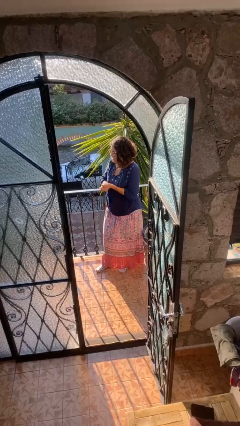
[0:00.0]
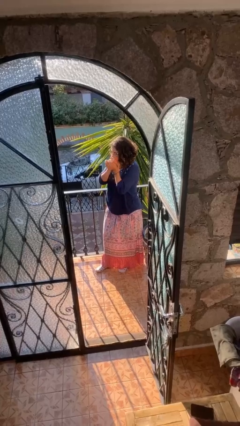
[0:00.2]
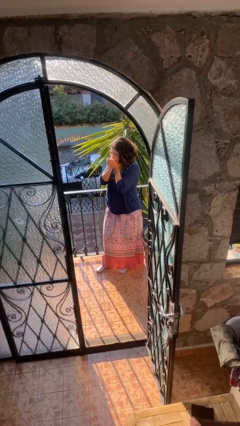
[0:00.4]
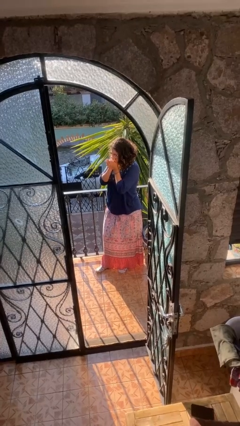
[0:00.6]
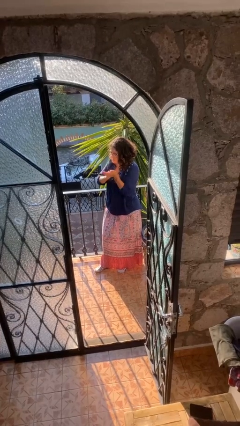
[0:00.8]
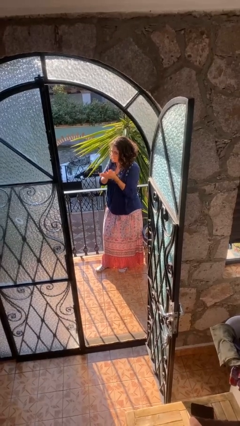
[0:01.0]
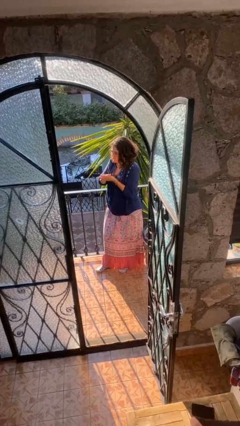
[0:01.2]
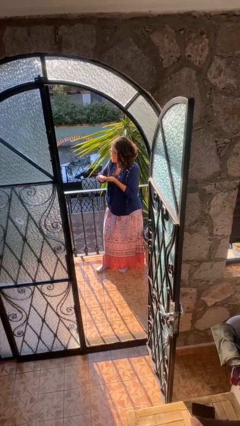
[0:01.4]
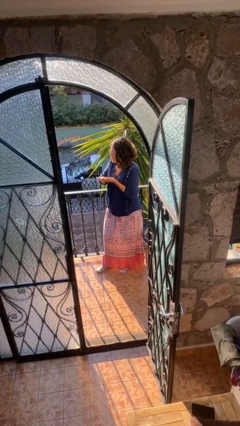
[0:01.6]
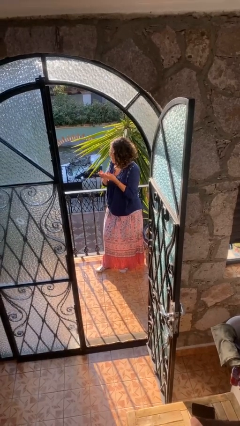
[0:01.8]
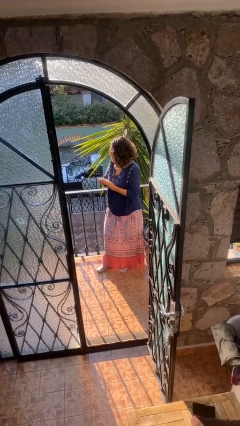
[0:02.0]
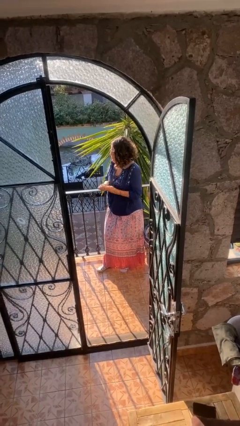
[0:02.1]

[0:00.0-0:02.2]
person blows into hands

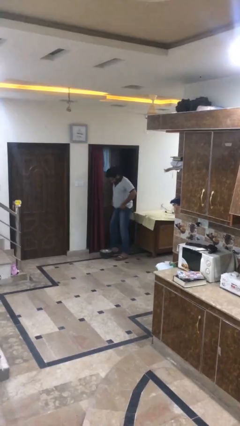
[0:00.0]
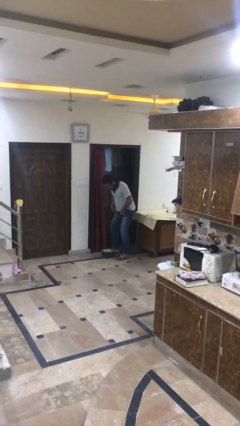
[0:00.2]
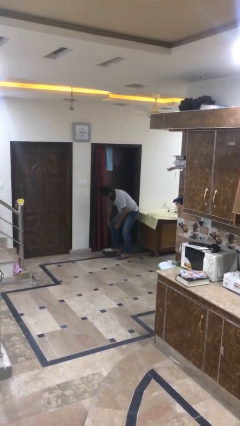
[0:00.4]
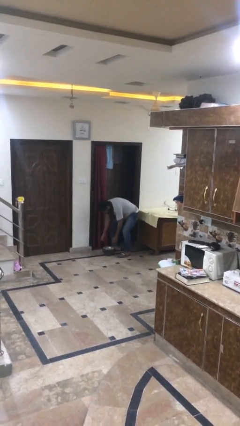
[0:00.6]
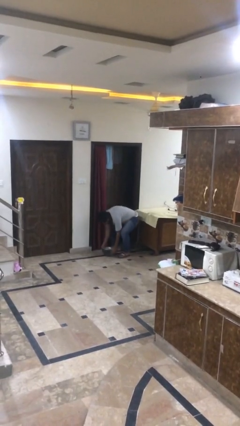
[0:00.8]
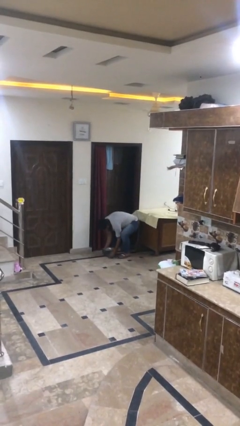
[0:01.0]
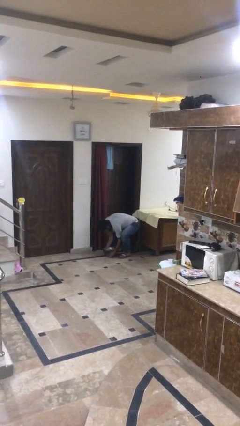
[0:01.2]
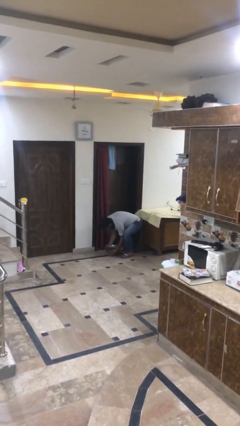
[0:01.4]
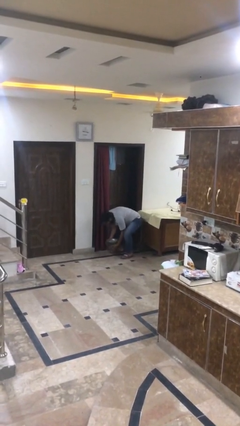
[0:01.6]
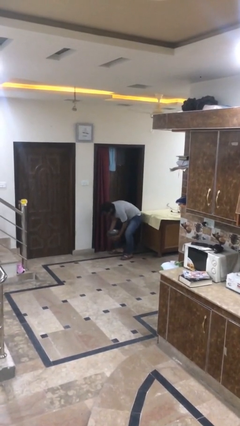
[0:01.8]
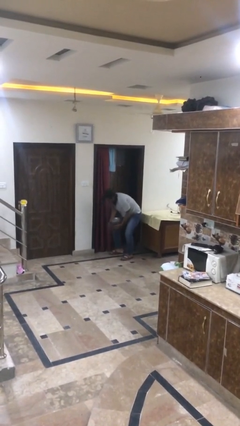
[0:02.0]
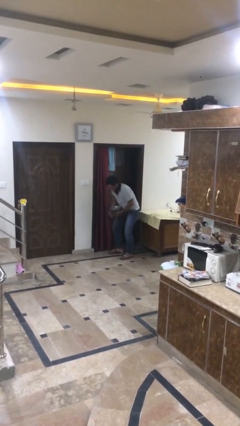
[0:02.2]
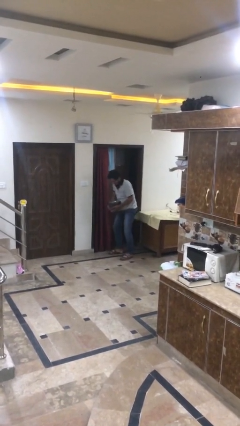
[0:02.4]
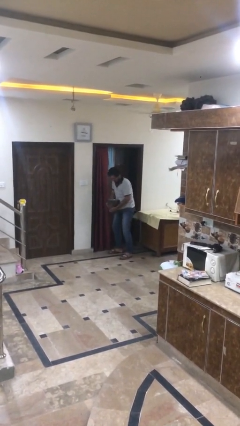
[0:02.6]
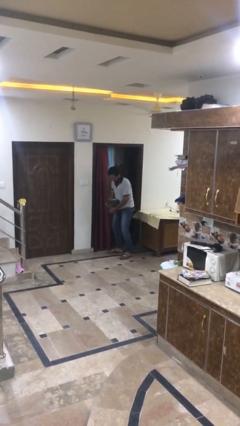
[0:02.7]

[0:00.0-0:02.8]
person picks up object from floor

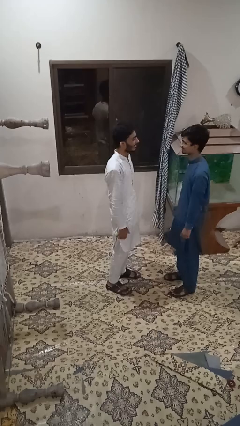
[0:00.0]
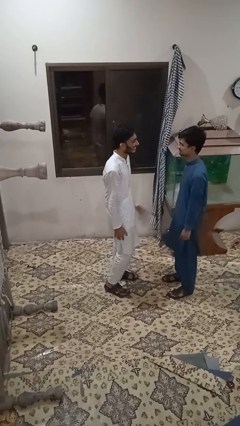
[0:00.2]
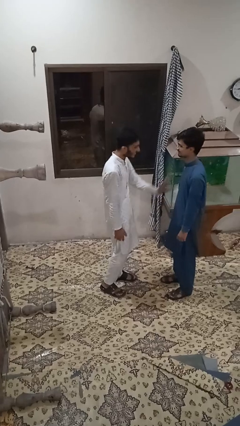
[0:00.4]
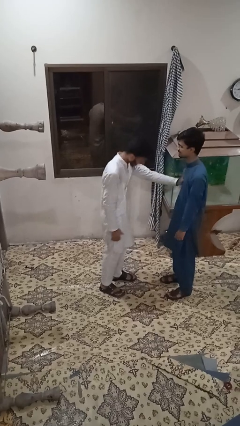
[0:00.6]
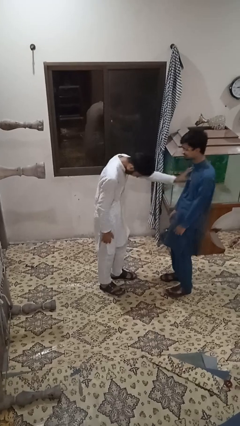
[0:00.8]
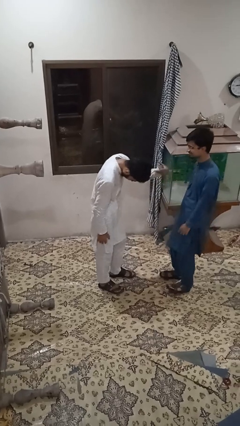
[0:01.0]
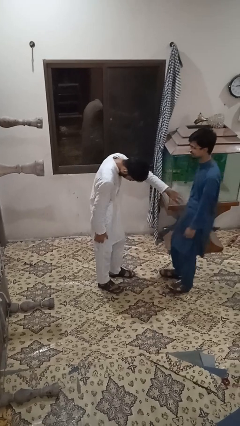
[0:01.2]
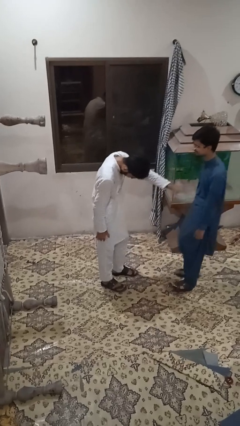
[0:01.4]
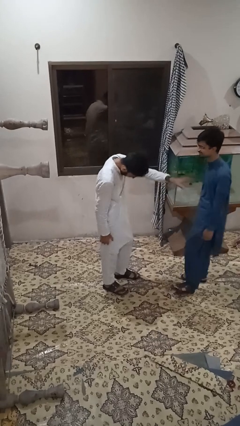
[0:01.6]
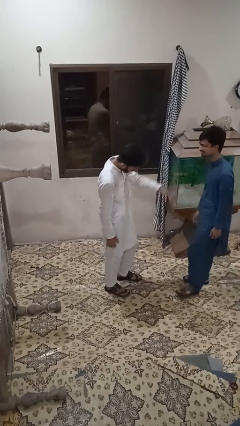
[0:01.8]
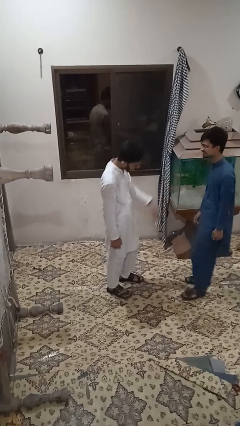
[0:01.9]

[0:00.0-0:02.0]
person shoves person

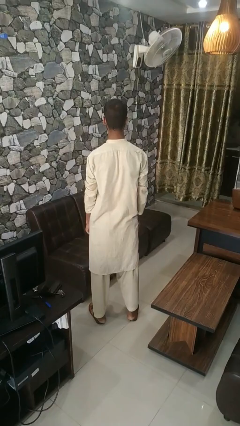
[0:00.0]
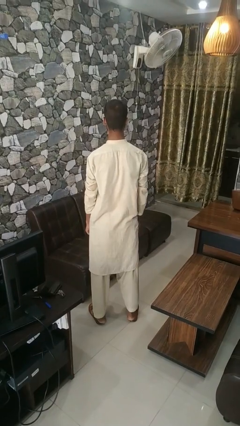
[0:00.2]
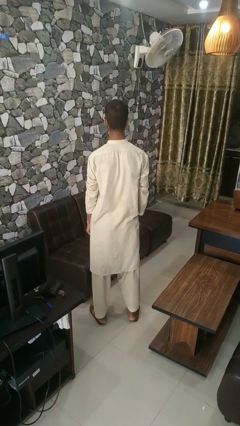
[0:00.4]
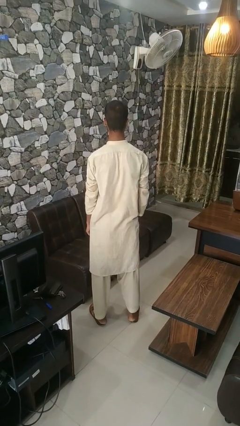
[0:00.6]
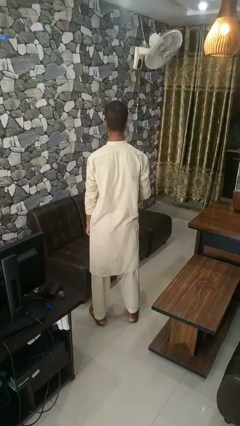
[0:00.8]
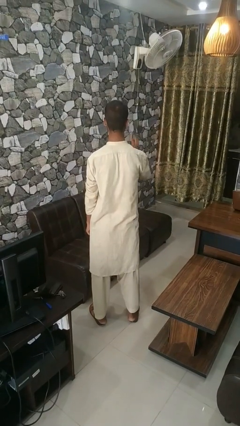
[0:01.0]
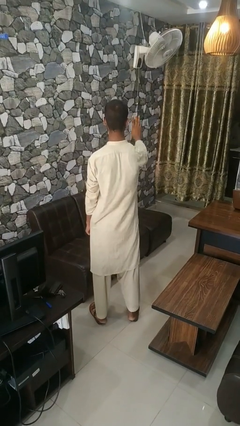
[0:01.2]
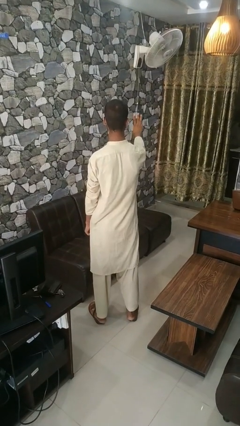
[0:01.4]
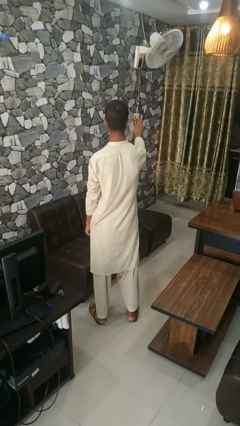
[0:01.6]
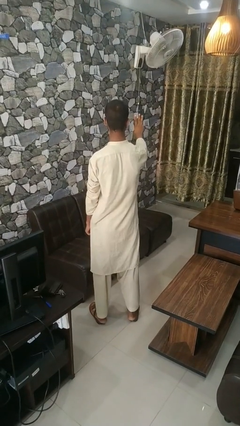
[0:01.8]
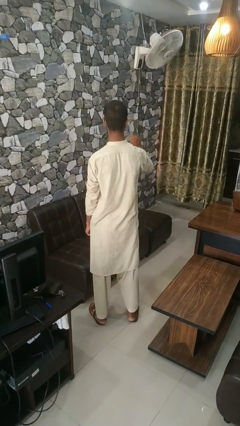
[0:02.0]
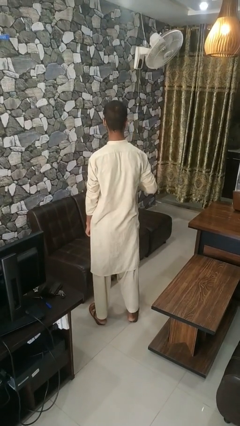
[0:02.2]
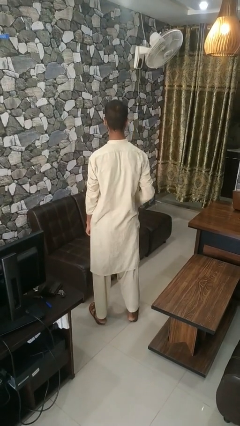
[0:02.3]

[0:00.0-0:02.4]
person gestures number three

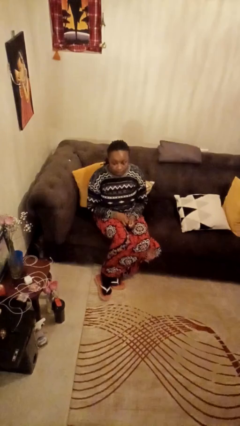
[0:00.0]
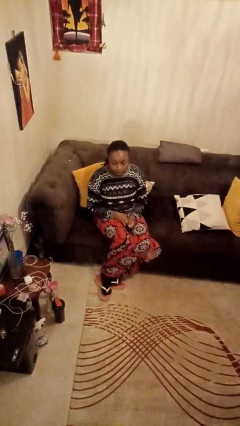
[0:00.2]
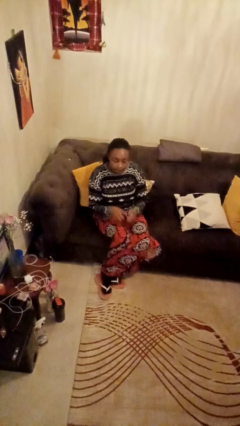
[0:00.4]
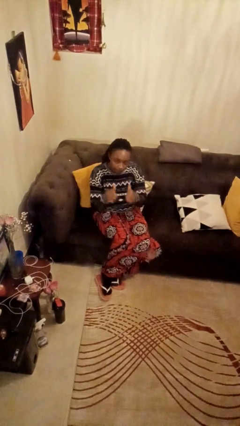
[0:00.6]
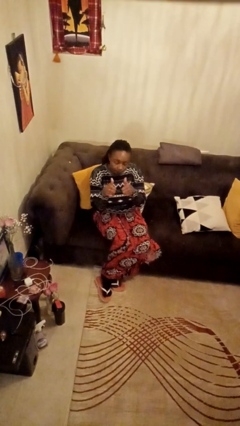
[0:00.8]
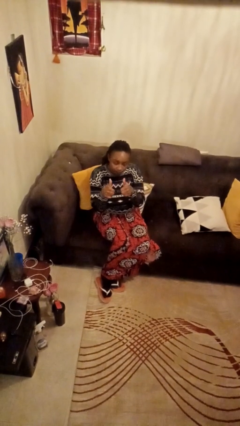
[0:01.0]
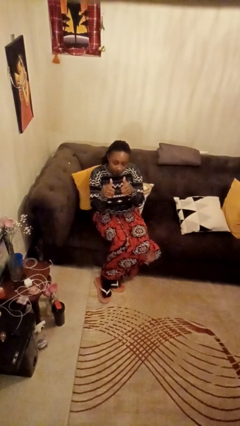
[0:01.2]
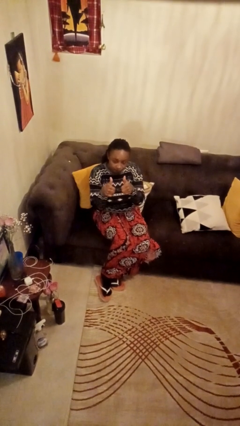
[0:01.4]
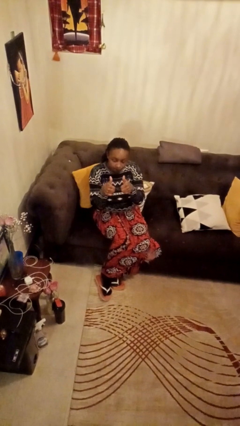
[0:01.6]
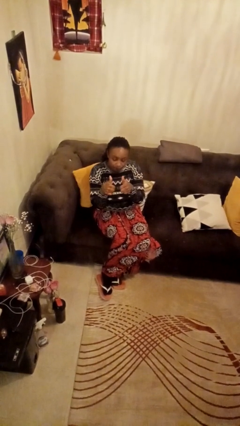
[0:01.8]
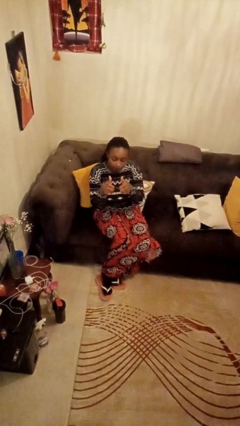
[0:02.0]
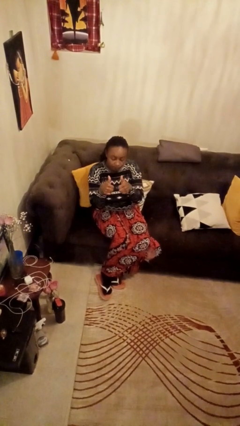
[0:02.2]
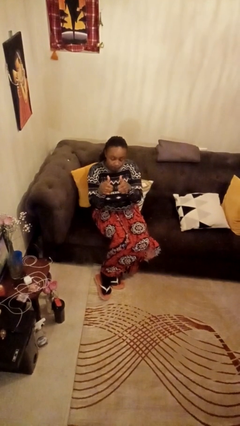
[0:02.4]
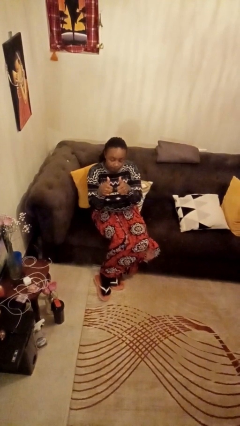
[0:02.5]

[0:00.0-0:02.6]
person gestures thumbs up

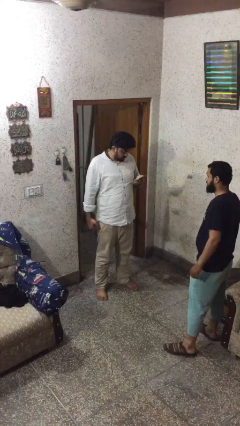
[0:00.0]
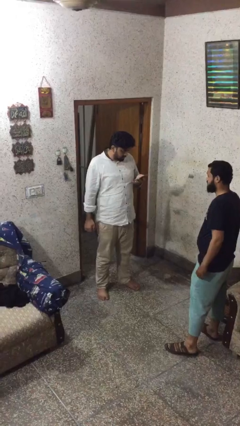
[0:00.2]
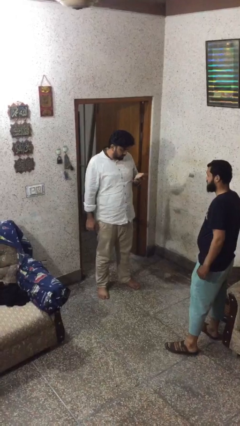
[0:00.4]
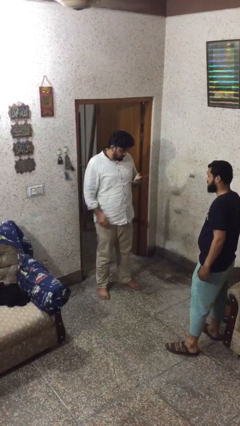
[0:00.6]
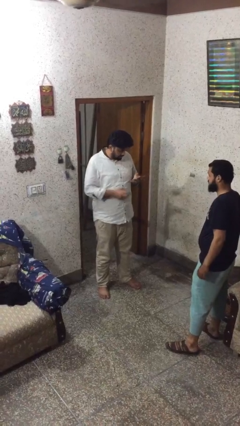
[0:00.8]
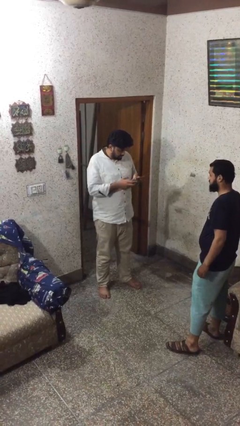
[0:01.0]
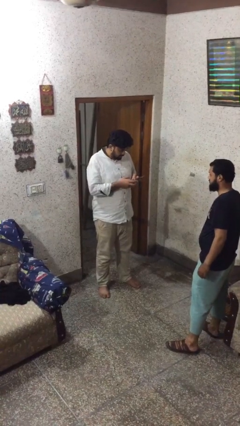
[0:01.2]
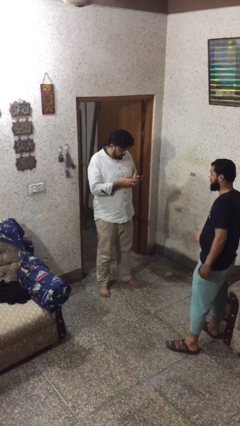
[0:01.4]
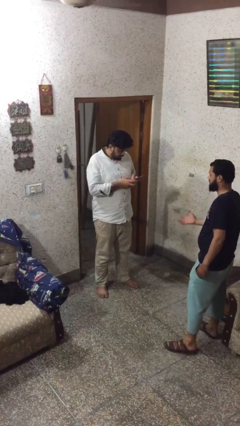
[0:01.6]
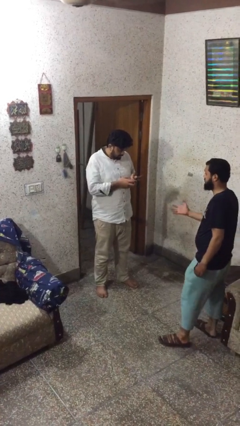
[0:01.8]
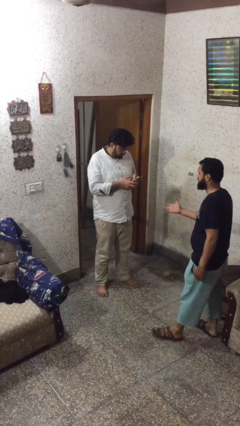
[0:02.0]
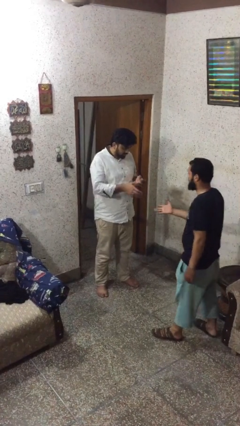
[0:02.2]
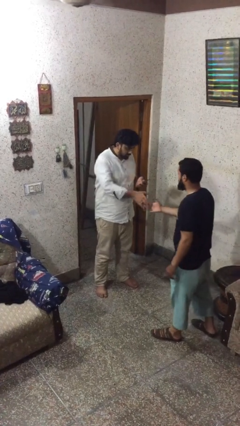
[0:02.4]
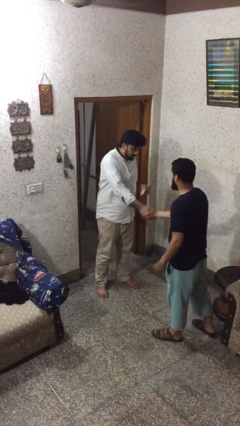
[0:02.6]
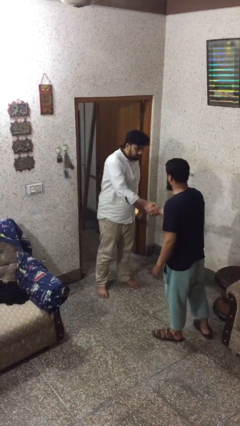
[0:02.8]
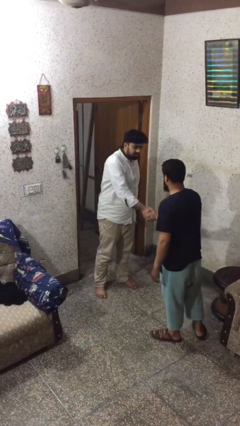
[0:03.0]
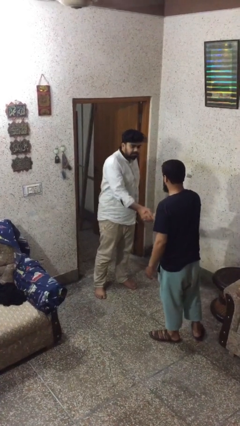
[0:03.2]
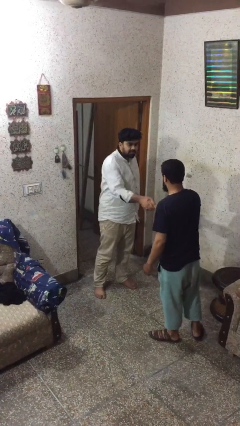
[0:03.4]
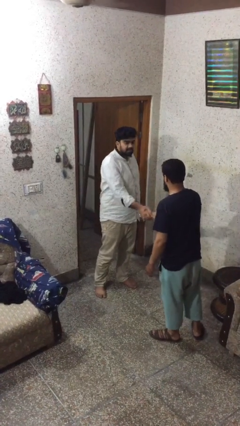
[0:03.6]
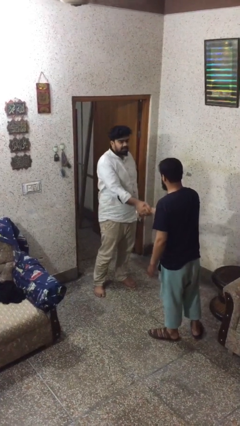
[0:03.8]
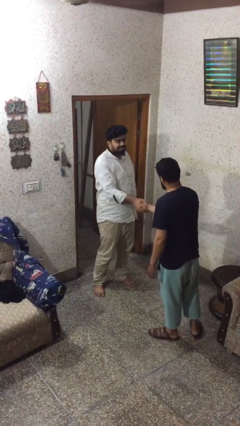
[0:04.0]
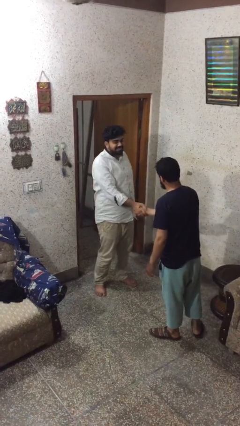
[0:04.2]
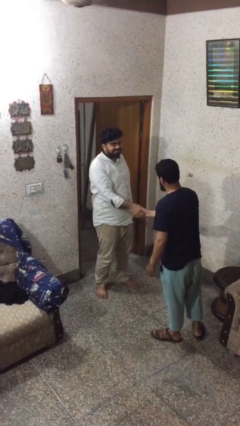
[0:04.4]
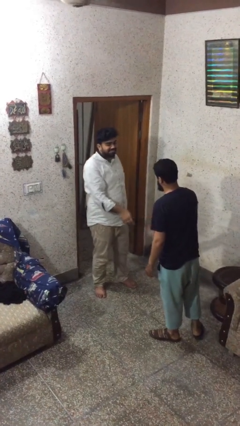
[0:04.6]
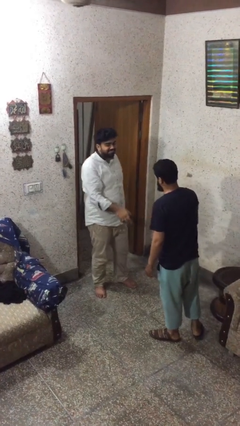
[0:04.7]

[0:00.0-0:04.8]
person shakes hand

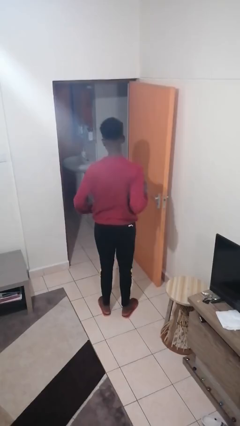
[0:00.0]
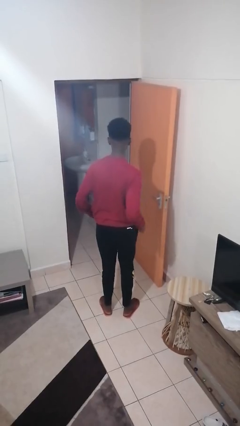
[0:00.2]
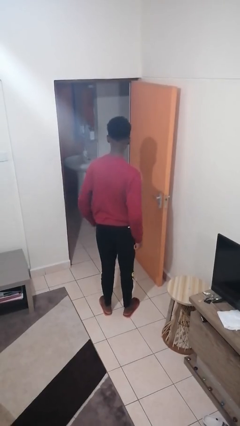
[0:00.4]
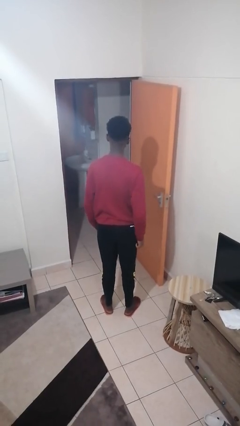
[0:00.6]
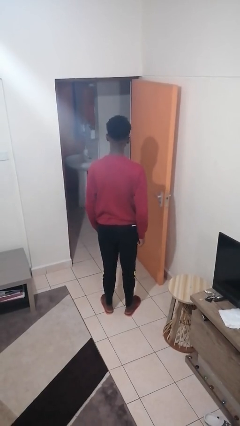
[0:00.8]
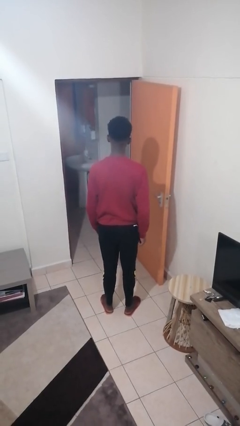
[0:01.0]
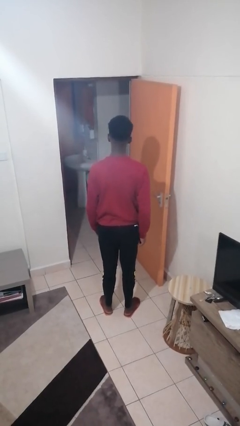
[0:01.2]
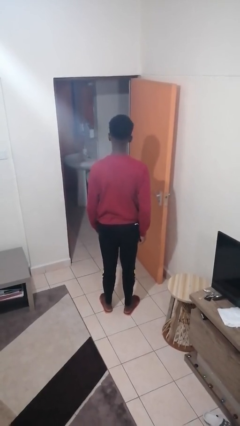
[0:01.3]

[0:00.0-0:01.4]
person punches
